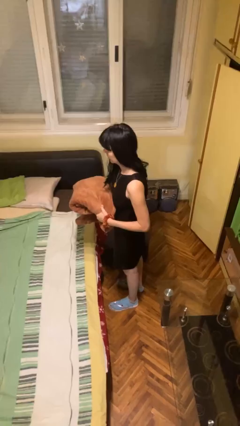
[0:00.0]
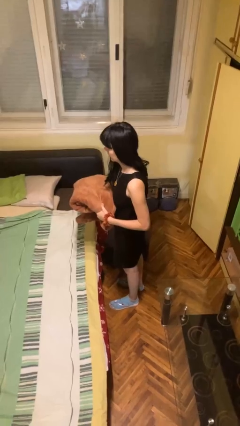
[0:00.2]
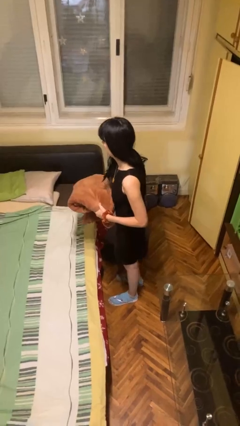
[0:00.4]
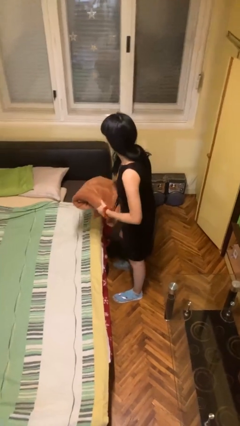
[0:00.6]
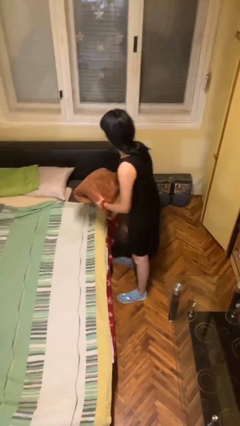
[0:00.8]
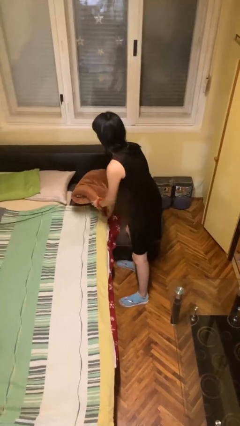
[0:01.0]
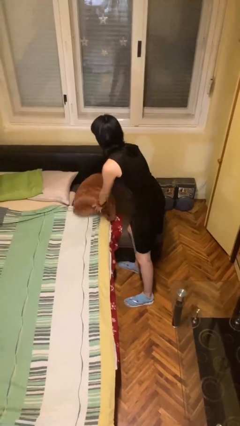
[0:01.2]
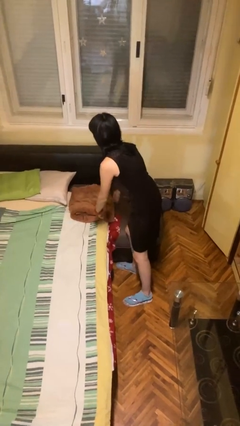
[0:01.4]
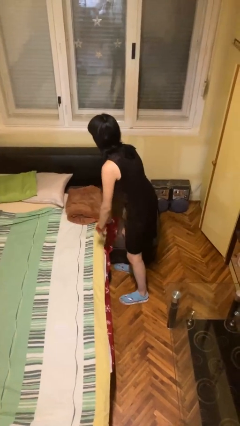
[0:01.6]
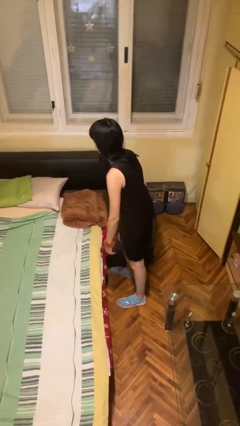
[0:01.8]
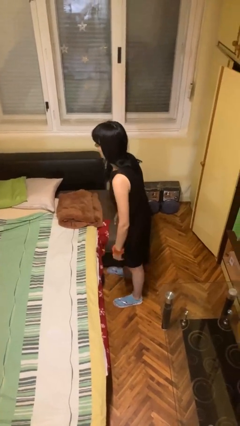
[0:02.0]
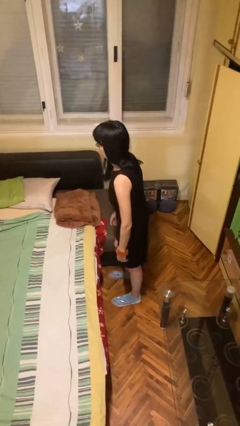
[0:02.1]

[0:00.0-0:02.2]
person puts down object on bed

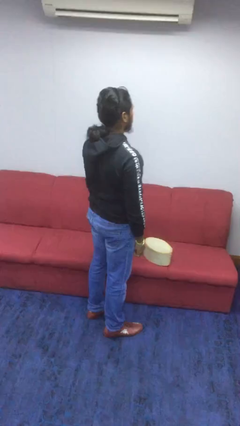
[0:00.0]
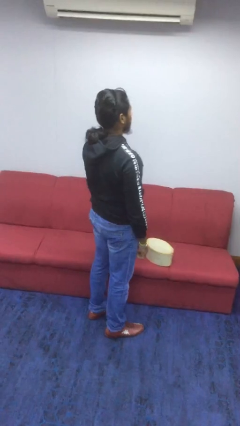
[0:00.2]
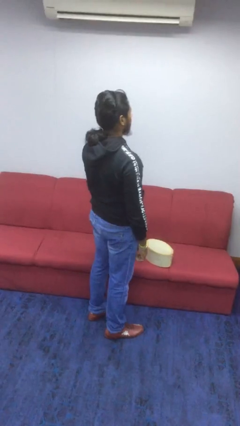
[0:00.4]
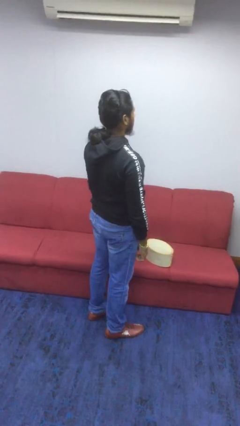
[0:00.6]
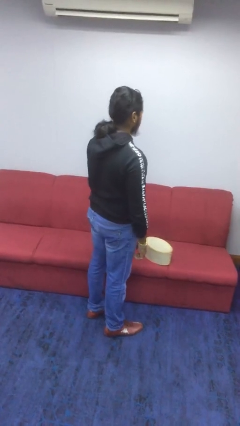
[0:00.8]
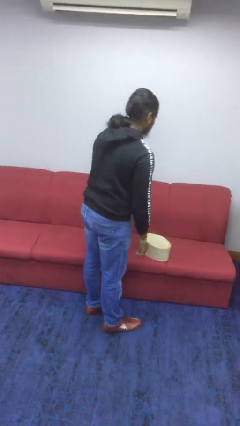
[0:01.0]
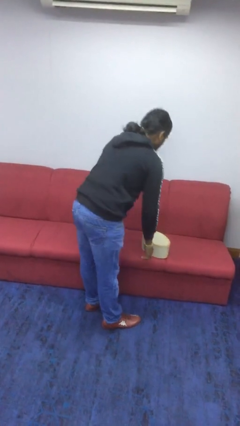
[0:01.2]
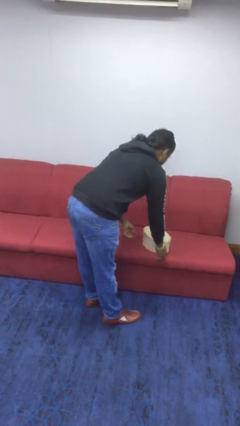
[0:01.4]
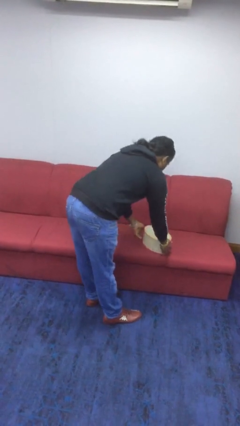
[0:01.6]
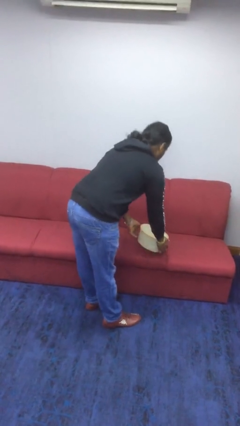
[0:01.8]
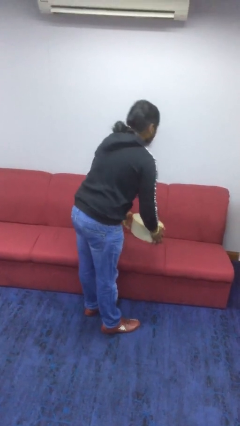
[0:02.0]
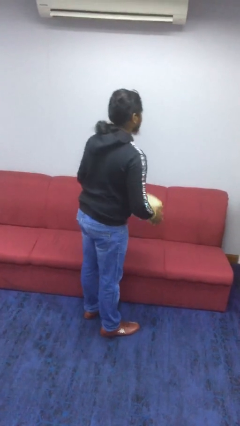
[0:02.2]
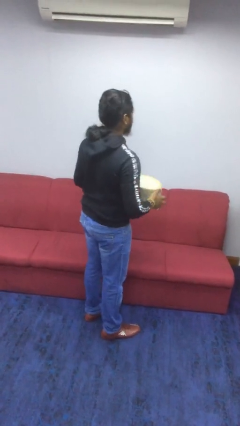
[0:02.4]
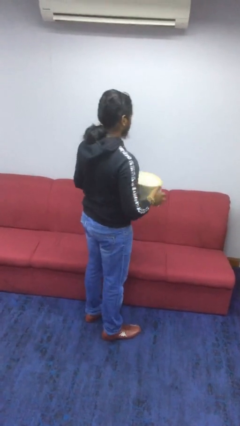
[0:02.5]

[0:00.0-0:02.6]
person picks up object from couch

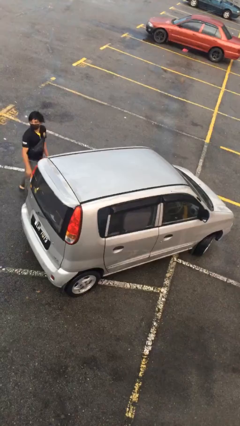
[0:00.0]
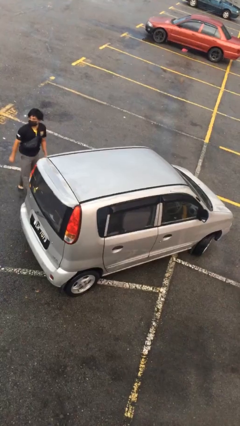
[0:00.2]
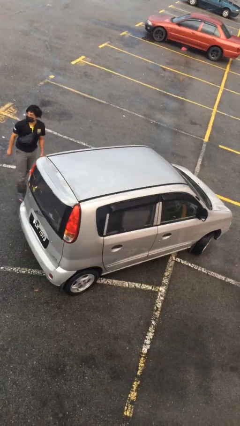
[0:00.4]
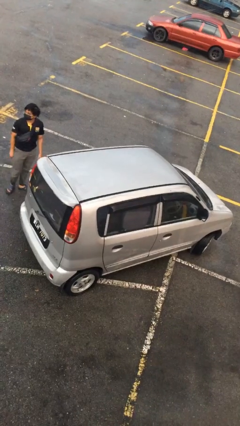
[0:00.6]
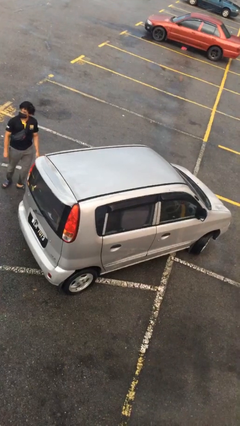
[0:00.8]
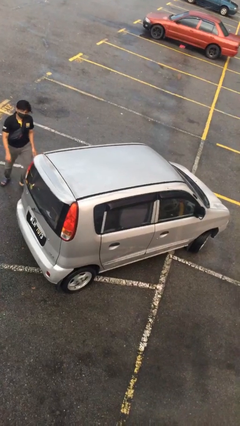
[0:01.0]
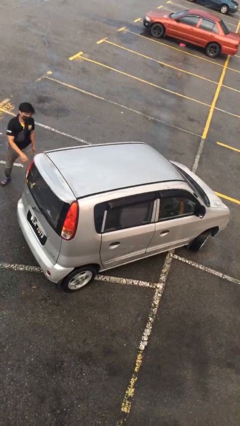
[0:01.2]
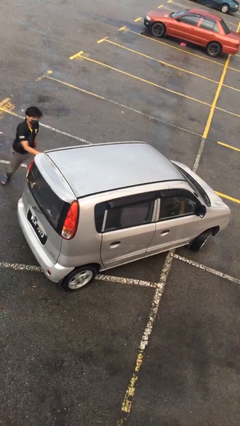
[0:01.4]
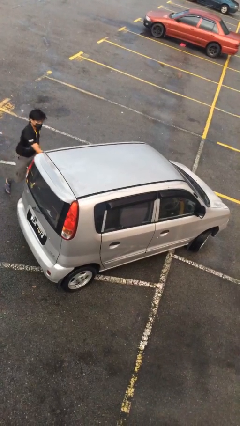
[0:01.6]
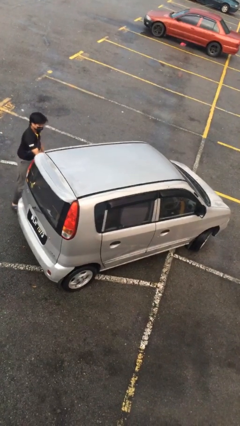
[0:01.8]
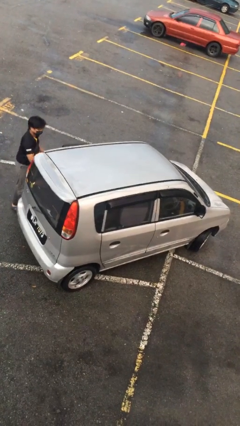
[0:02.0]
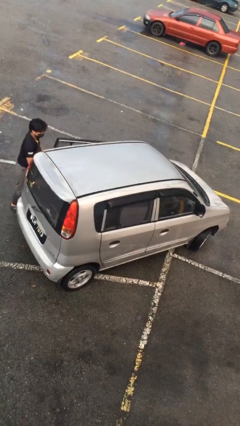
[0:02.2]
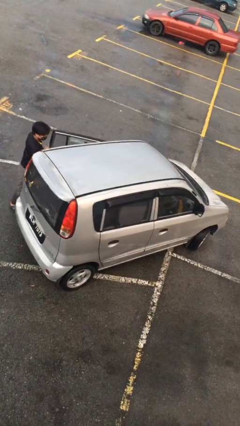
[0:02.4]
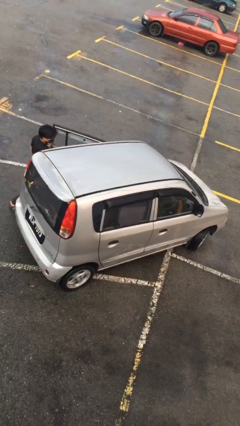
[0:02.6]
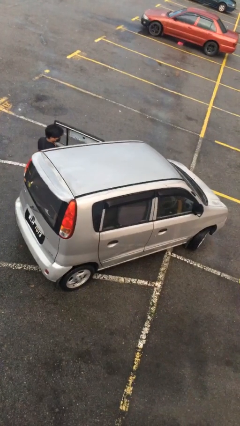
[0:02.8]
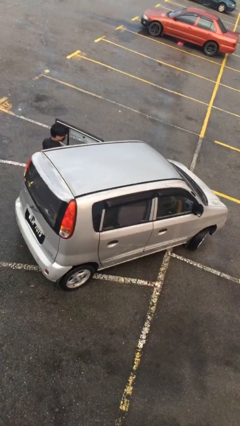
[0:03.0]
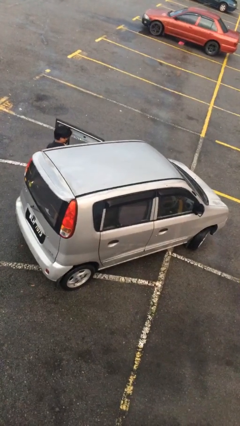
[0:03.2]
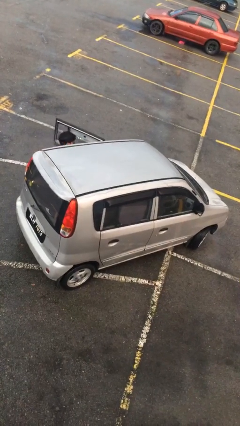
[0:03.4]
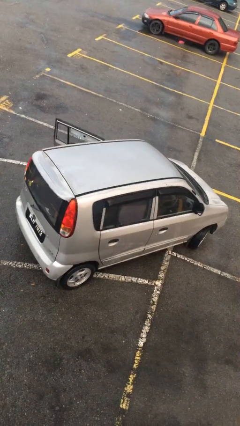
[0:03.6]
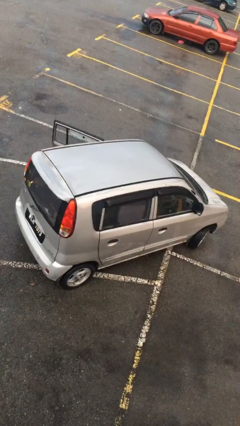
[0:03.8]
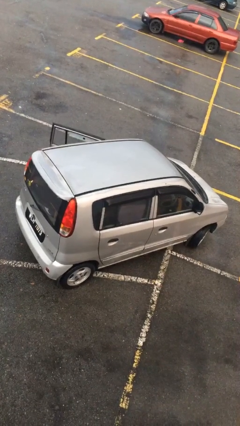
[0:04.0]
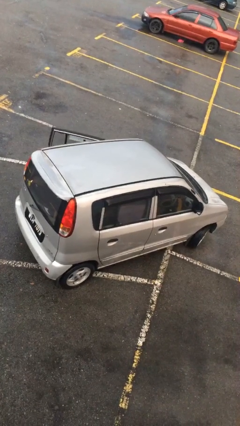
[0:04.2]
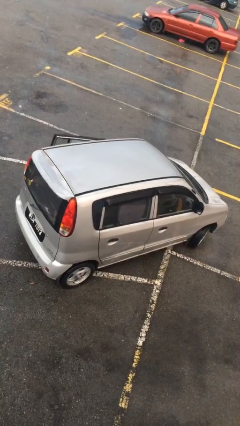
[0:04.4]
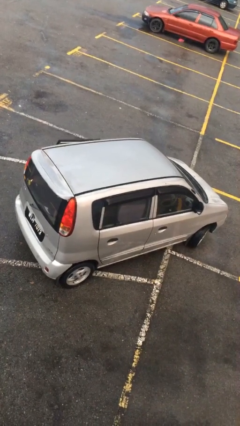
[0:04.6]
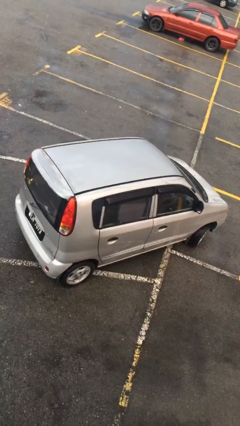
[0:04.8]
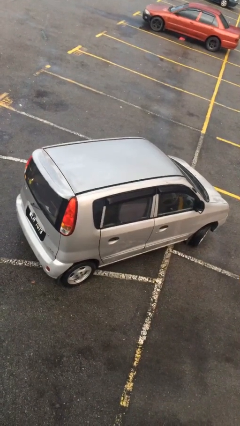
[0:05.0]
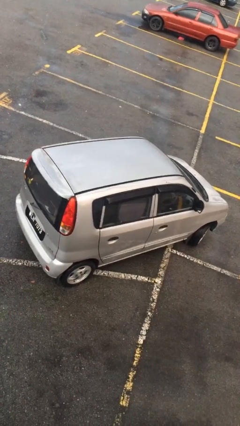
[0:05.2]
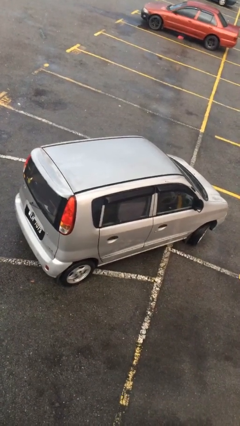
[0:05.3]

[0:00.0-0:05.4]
car picks up person

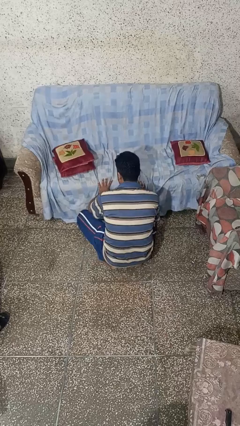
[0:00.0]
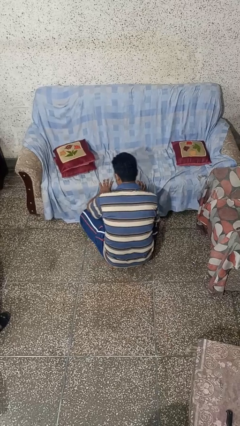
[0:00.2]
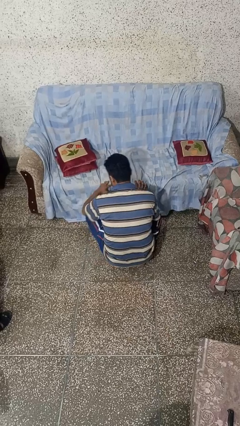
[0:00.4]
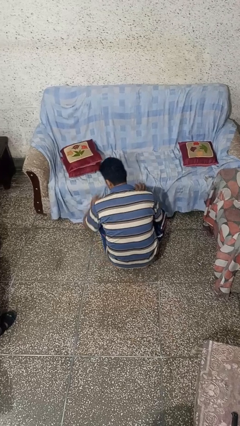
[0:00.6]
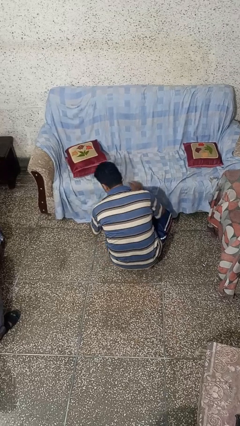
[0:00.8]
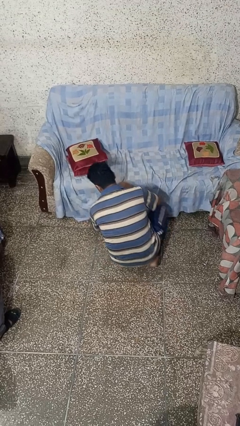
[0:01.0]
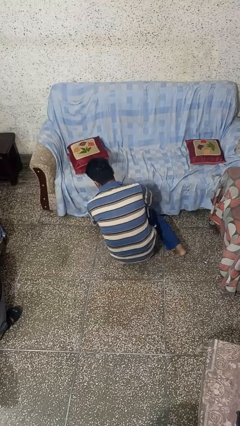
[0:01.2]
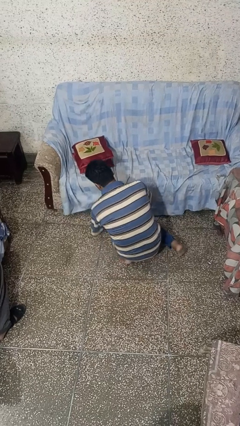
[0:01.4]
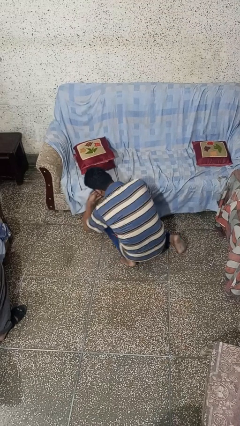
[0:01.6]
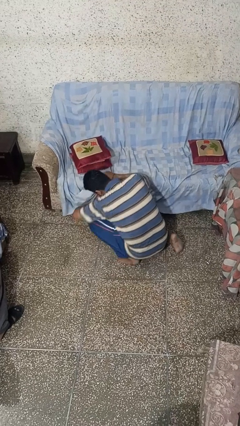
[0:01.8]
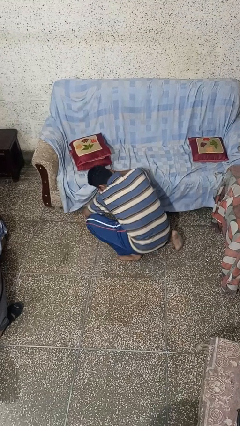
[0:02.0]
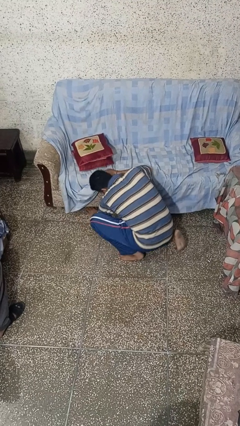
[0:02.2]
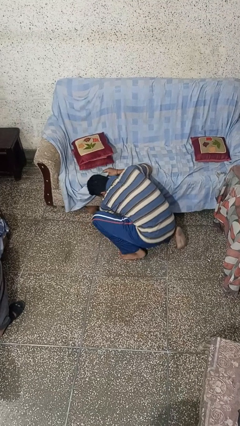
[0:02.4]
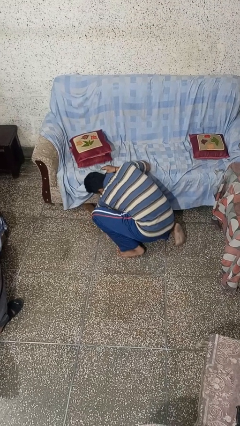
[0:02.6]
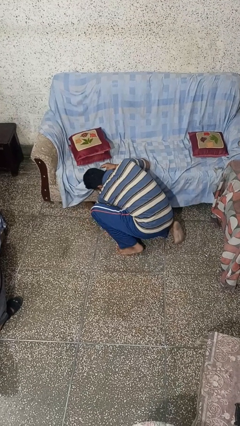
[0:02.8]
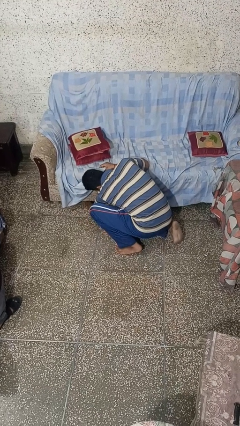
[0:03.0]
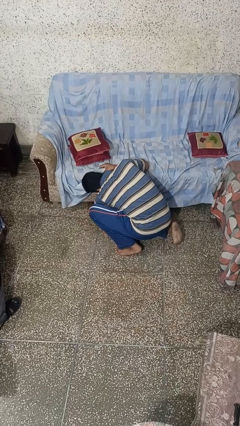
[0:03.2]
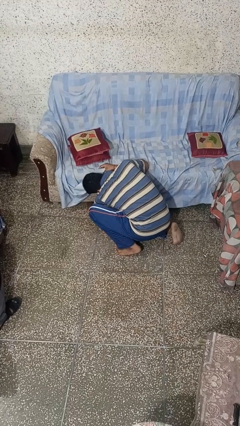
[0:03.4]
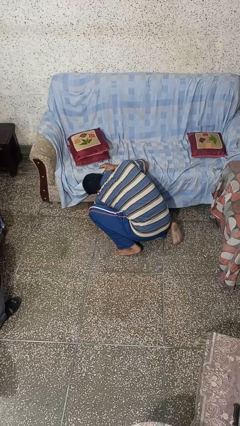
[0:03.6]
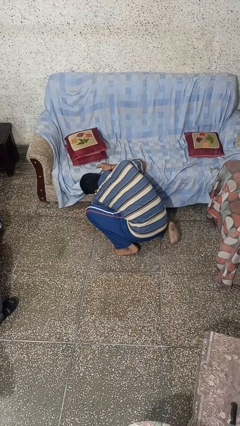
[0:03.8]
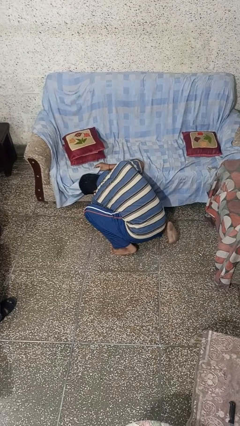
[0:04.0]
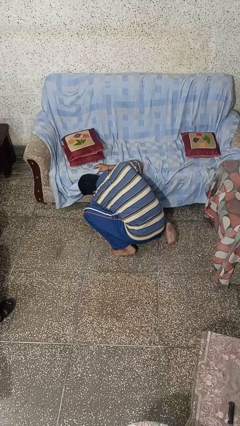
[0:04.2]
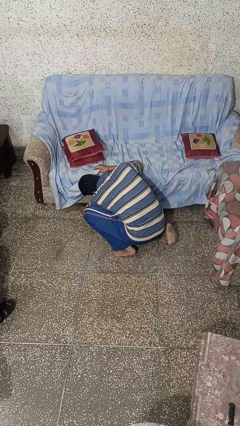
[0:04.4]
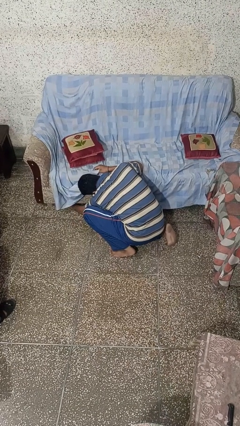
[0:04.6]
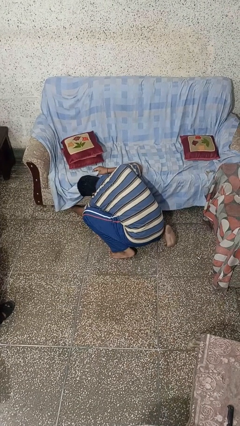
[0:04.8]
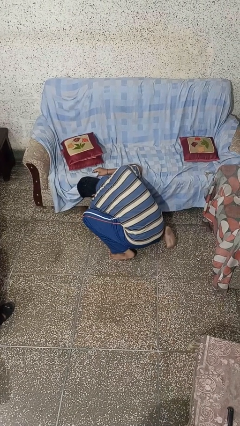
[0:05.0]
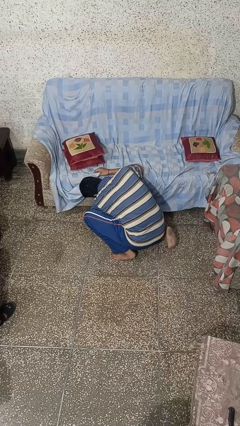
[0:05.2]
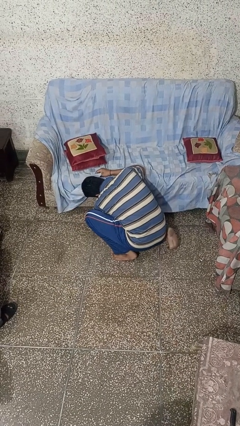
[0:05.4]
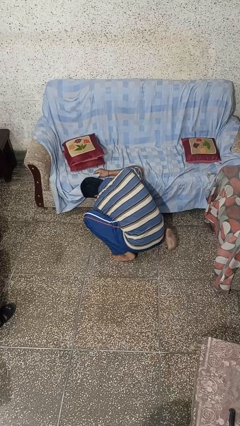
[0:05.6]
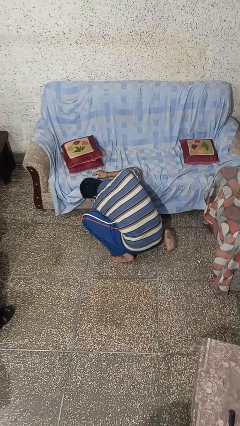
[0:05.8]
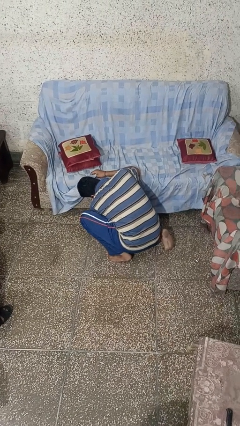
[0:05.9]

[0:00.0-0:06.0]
person searches under couch

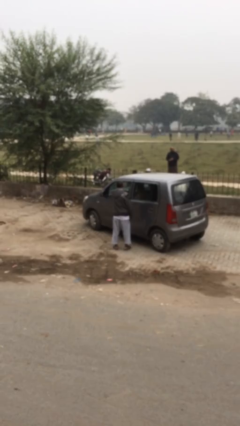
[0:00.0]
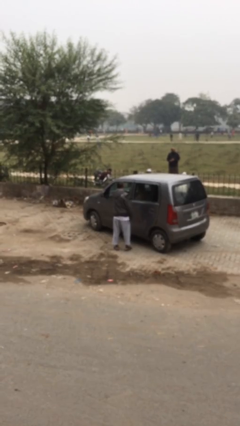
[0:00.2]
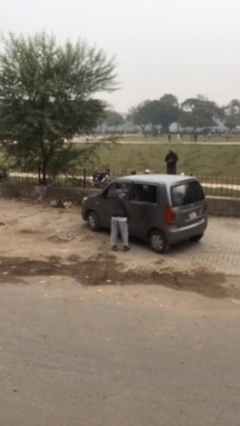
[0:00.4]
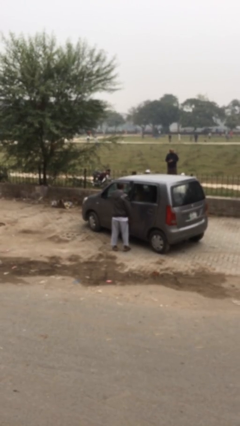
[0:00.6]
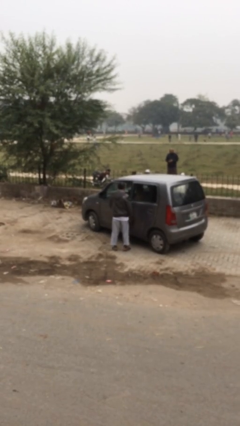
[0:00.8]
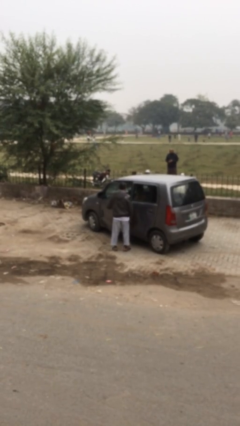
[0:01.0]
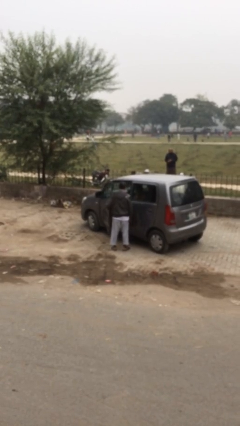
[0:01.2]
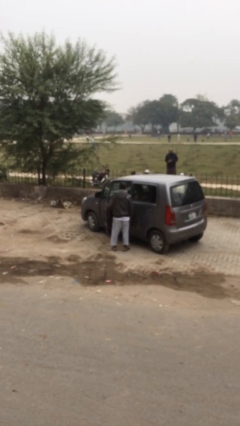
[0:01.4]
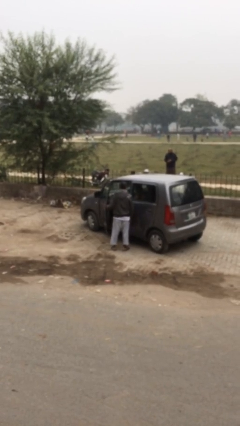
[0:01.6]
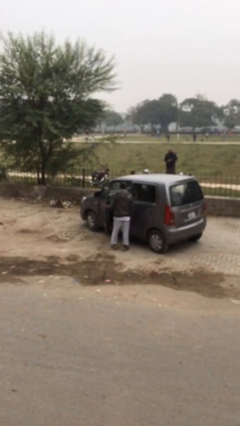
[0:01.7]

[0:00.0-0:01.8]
person opens car door
